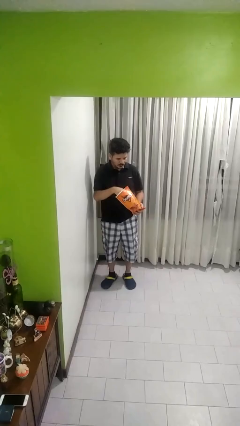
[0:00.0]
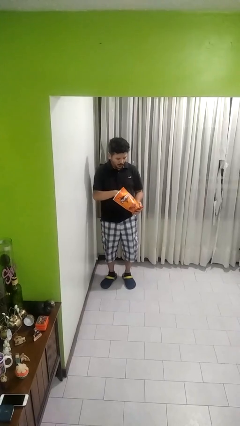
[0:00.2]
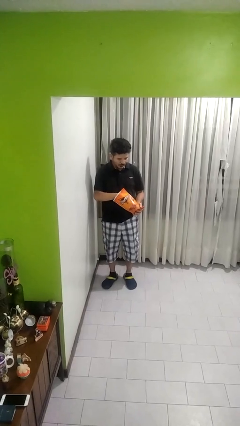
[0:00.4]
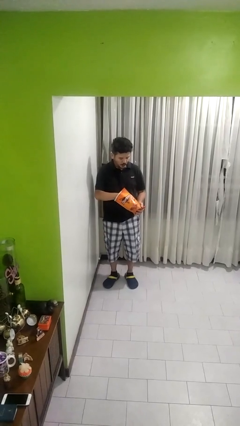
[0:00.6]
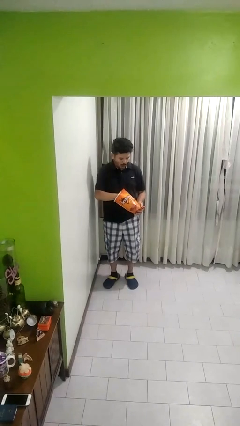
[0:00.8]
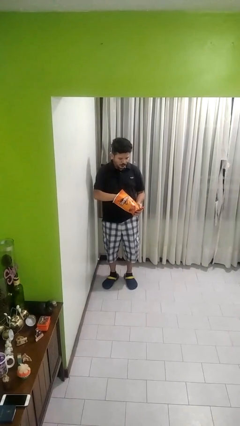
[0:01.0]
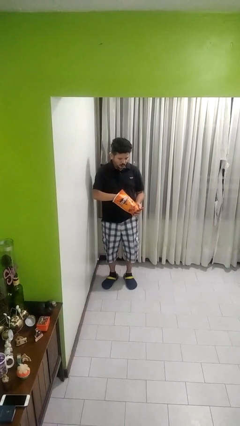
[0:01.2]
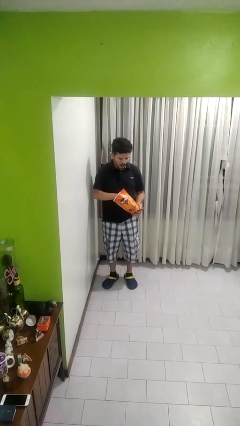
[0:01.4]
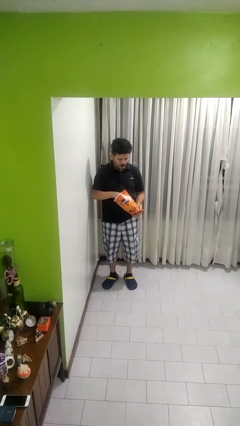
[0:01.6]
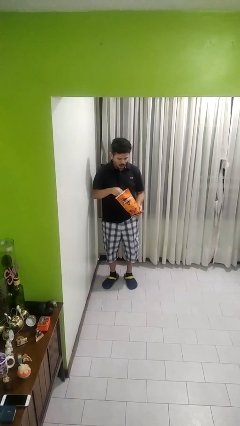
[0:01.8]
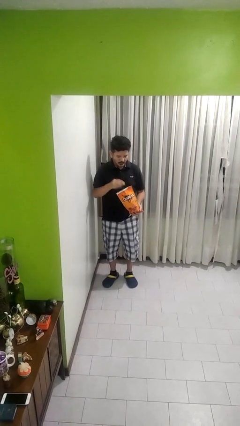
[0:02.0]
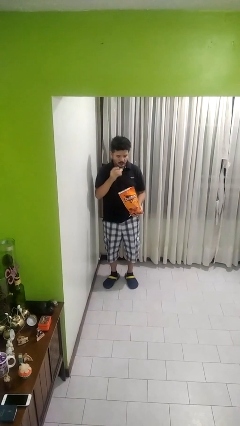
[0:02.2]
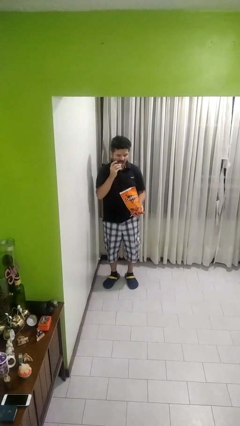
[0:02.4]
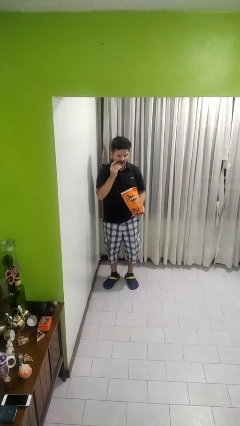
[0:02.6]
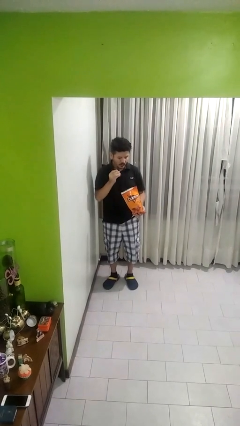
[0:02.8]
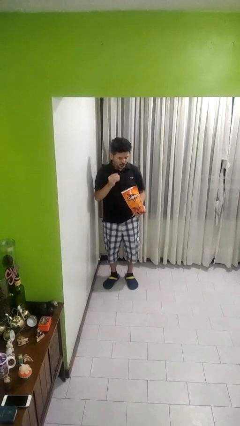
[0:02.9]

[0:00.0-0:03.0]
person eats snack from bag

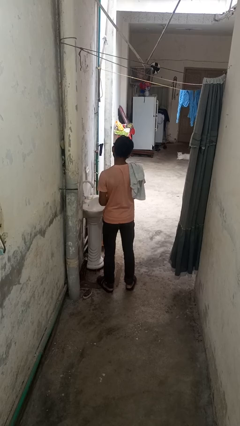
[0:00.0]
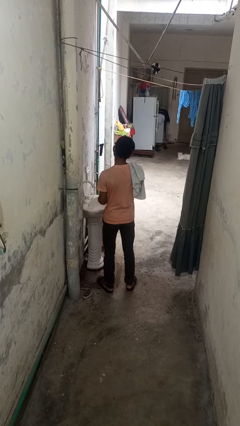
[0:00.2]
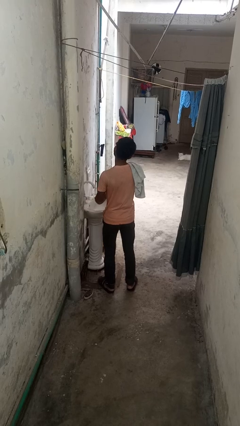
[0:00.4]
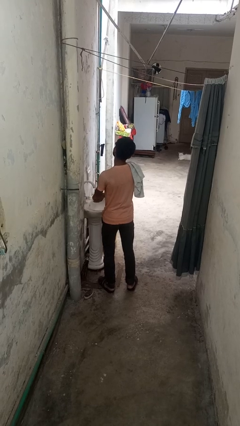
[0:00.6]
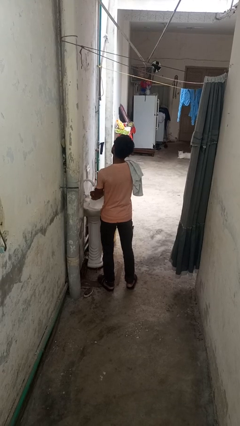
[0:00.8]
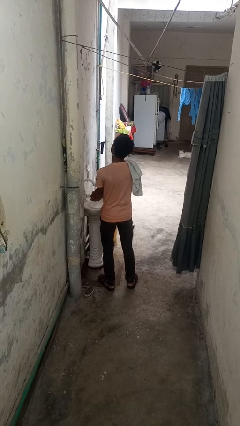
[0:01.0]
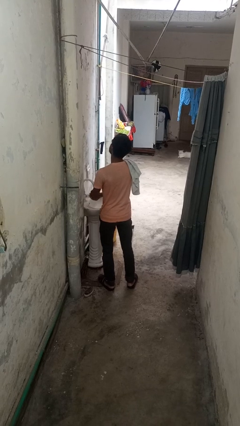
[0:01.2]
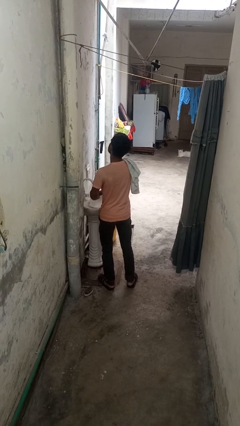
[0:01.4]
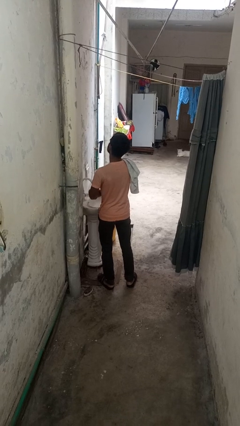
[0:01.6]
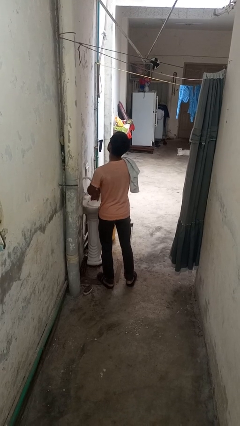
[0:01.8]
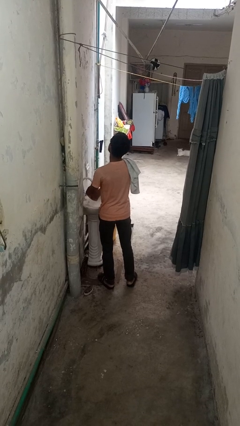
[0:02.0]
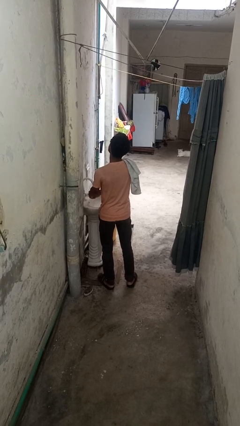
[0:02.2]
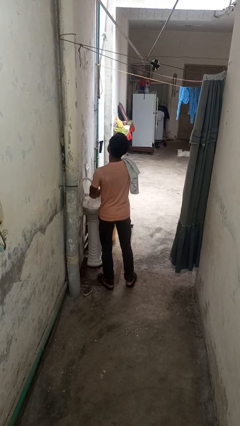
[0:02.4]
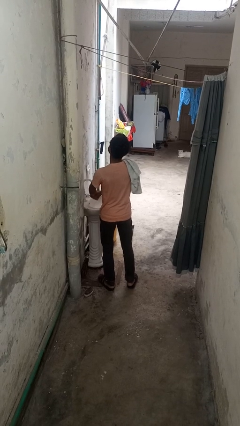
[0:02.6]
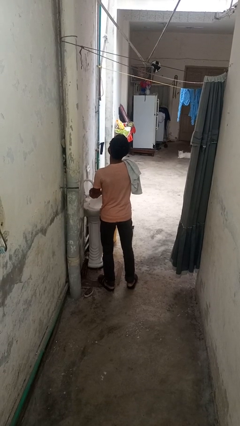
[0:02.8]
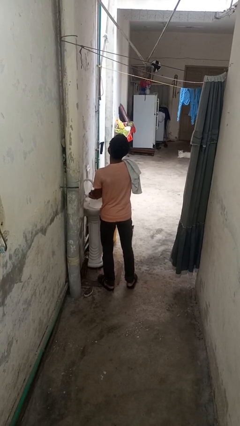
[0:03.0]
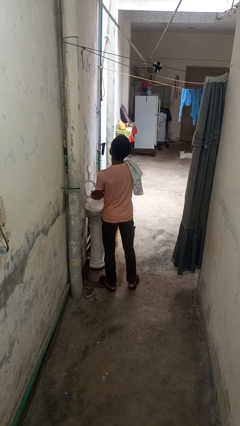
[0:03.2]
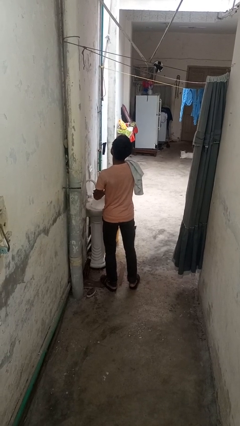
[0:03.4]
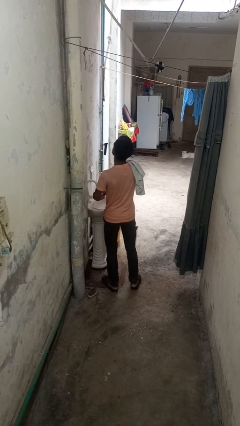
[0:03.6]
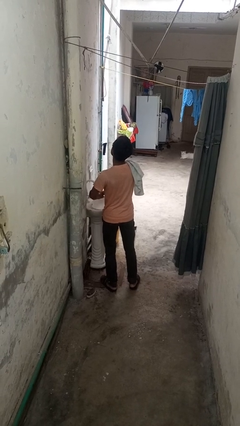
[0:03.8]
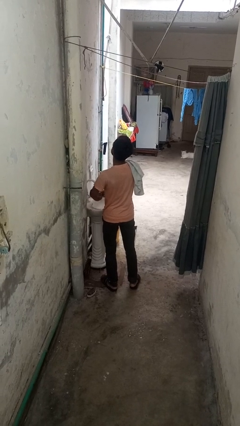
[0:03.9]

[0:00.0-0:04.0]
person washes hands

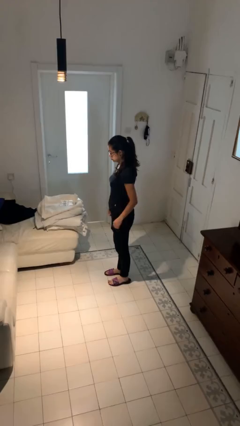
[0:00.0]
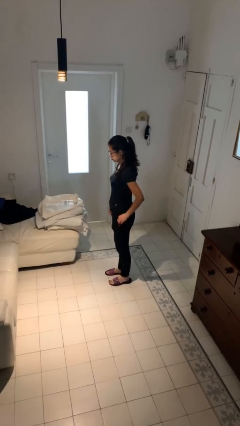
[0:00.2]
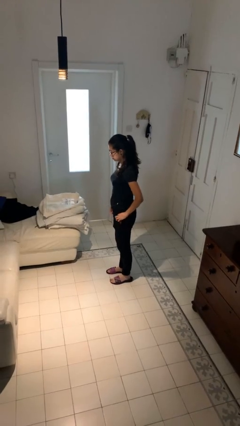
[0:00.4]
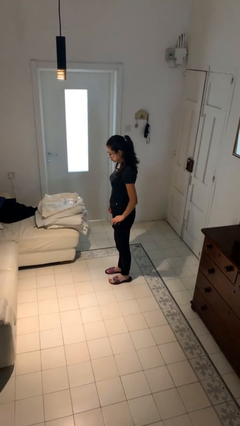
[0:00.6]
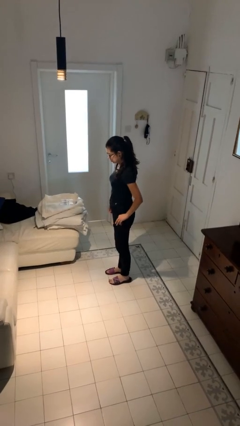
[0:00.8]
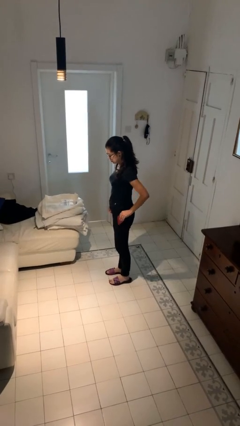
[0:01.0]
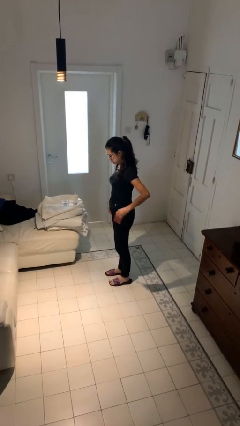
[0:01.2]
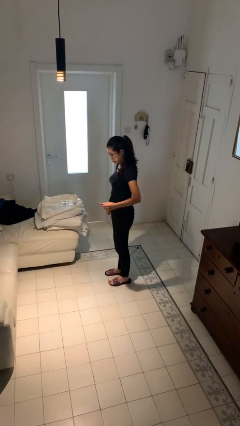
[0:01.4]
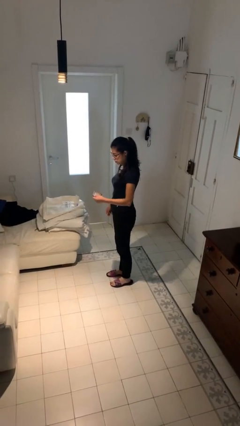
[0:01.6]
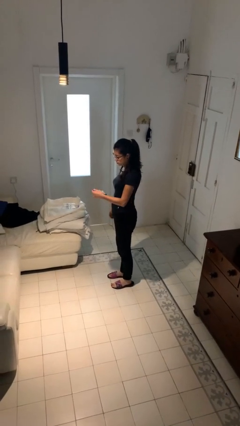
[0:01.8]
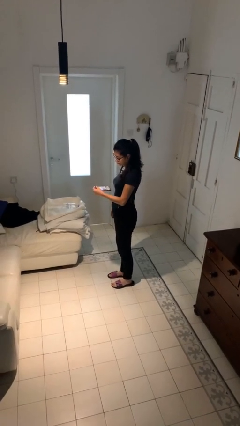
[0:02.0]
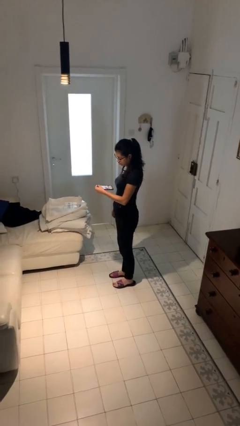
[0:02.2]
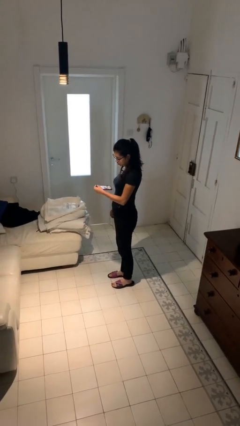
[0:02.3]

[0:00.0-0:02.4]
person takes phone from pocket

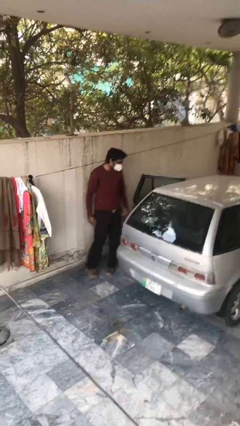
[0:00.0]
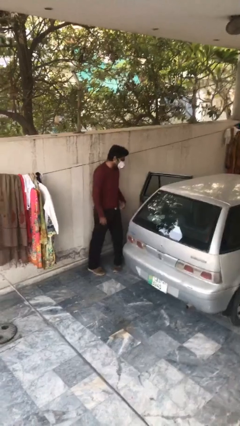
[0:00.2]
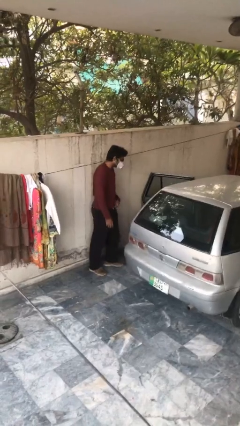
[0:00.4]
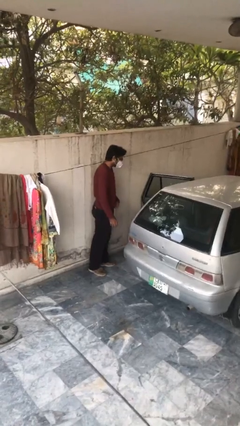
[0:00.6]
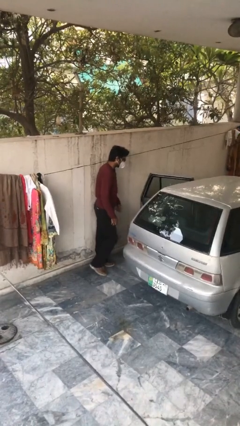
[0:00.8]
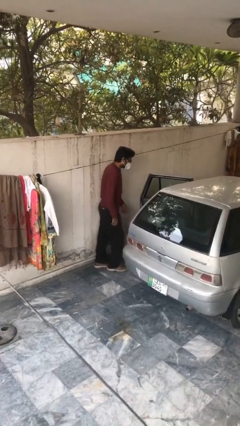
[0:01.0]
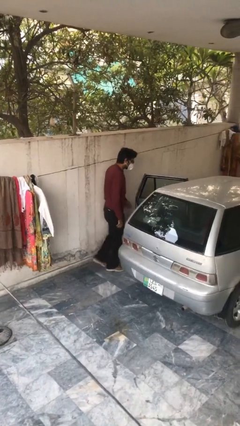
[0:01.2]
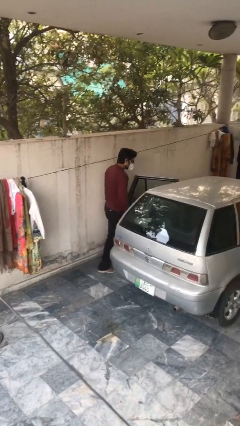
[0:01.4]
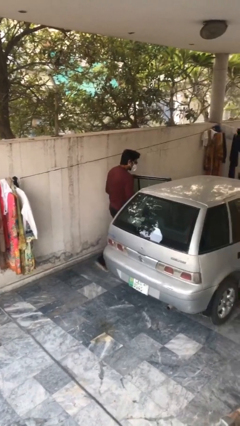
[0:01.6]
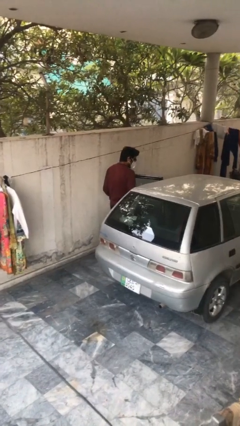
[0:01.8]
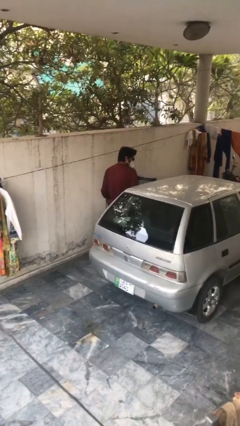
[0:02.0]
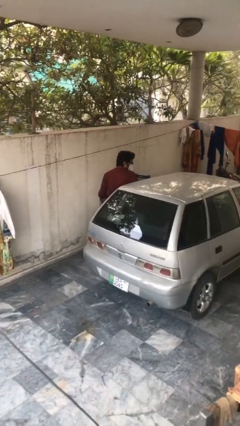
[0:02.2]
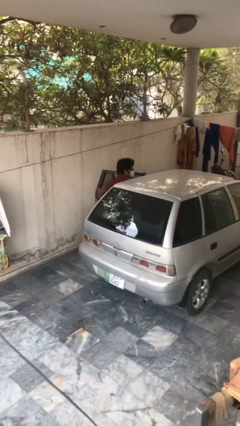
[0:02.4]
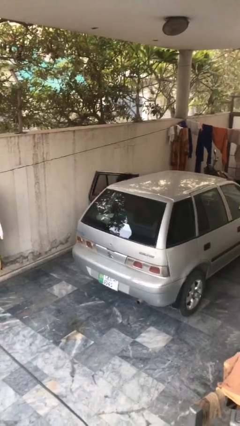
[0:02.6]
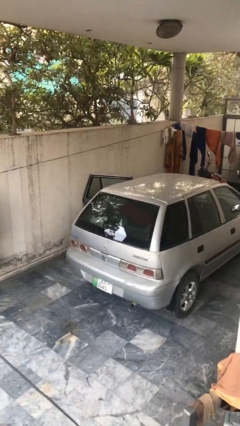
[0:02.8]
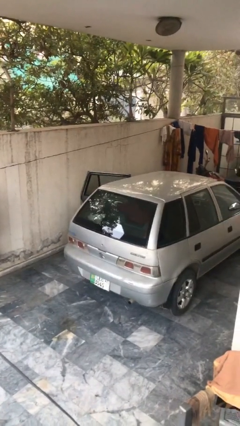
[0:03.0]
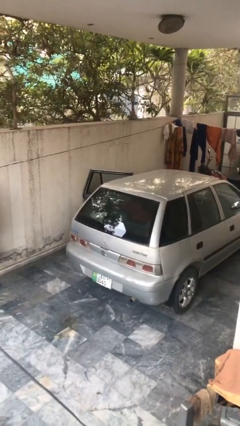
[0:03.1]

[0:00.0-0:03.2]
person enters car

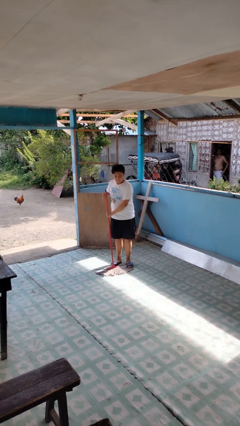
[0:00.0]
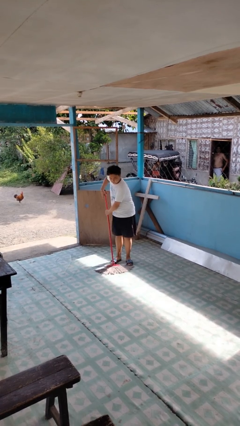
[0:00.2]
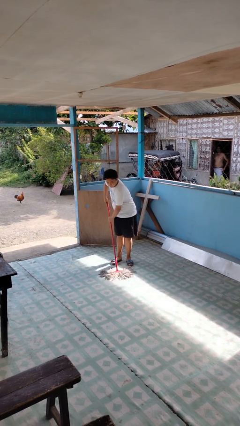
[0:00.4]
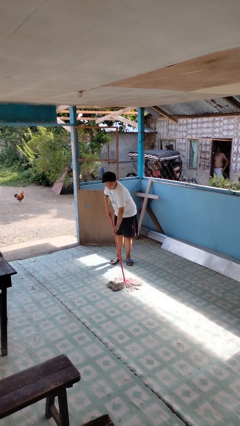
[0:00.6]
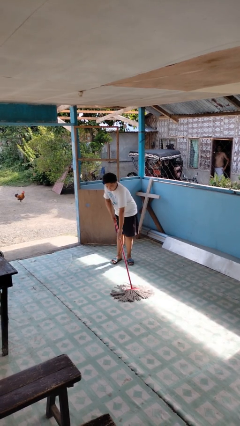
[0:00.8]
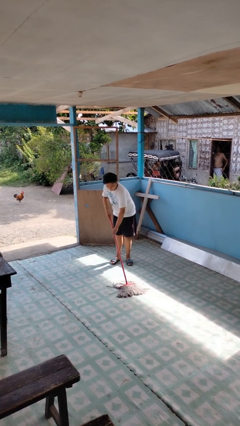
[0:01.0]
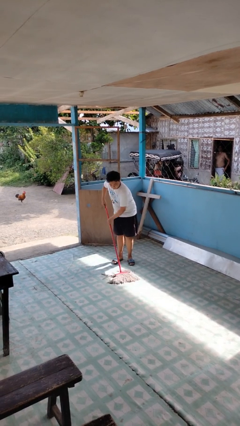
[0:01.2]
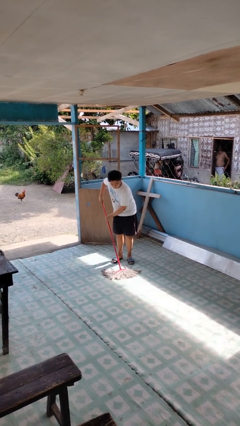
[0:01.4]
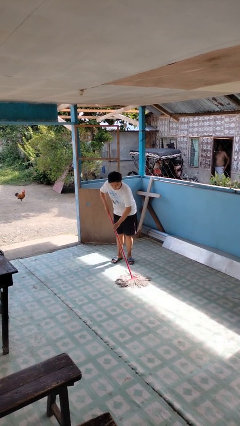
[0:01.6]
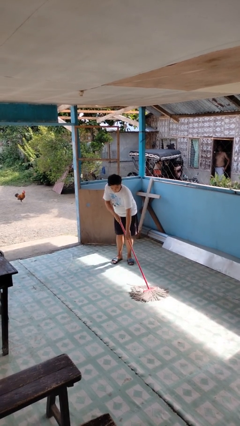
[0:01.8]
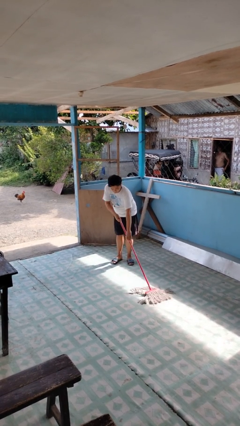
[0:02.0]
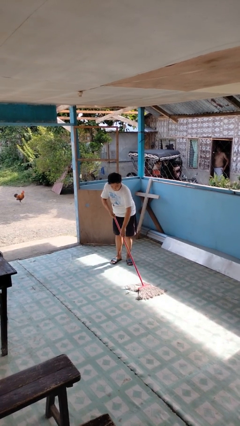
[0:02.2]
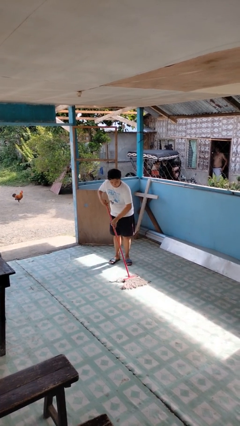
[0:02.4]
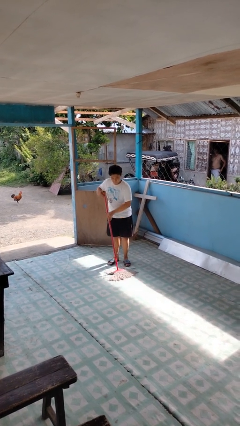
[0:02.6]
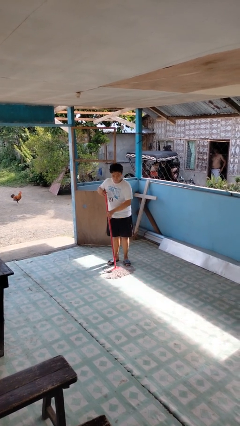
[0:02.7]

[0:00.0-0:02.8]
person mops

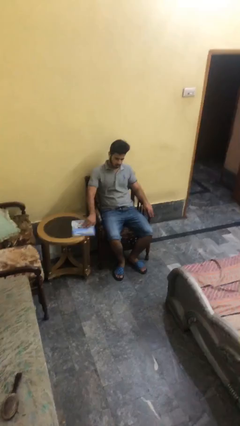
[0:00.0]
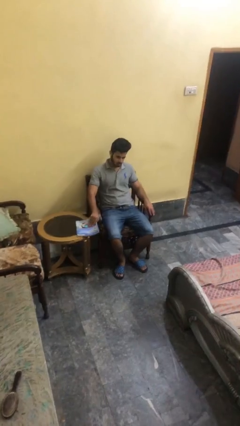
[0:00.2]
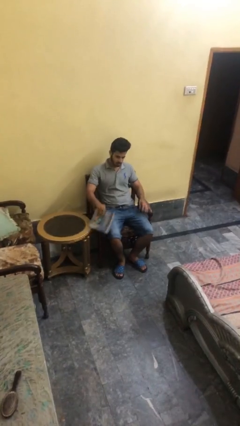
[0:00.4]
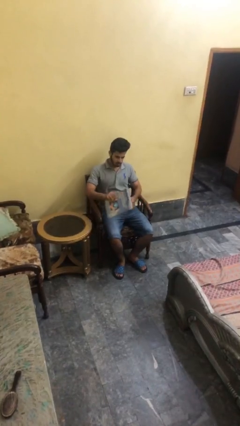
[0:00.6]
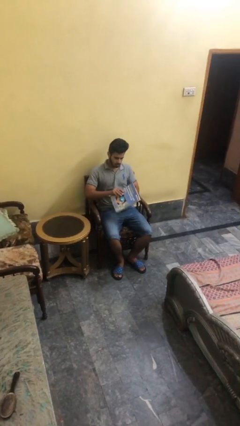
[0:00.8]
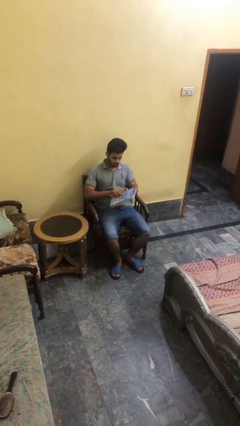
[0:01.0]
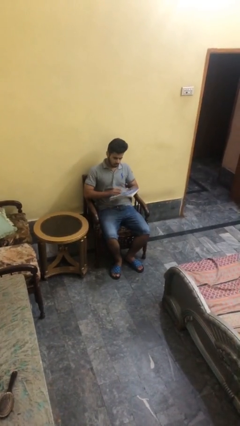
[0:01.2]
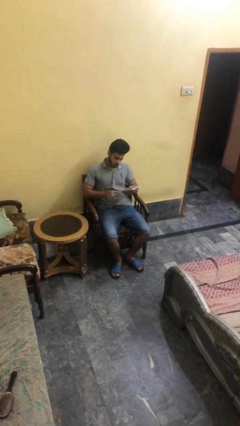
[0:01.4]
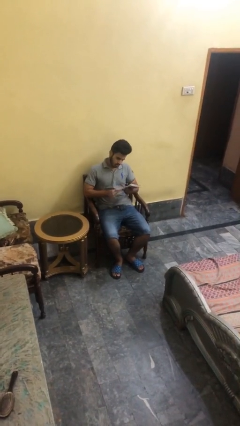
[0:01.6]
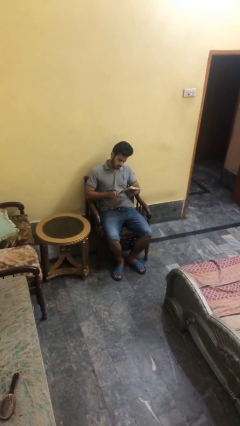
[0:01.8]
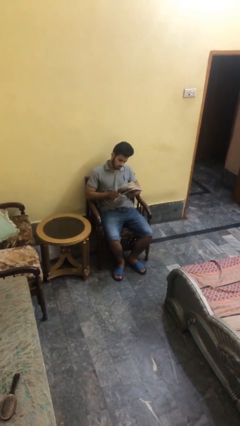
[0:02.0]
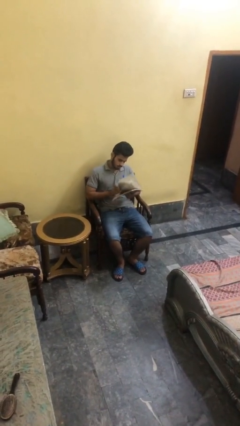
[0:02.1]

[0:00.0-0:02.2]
person picks up object from table
